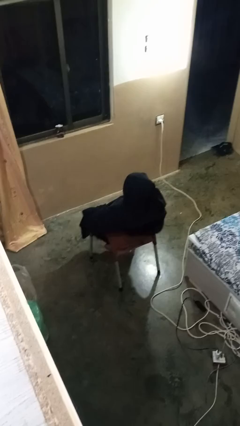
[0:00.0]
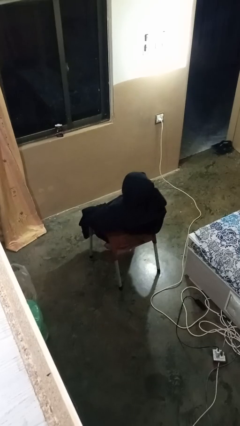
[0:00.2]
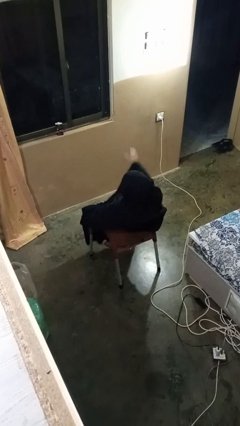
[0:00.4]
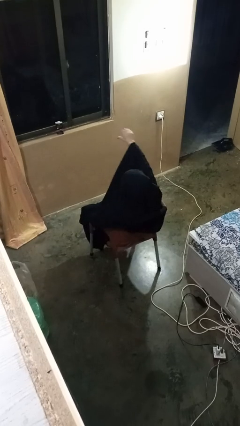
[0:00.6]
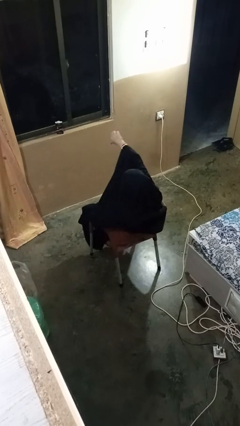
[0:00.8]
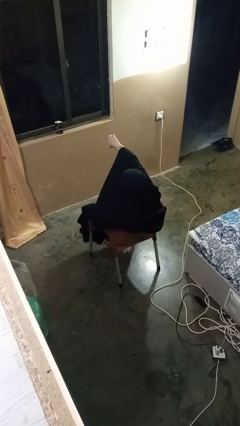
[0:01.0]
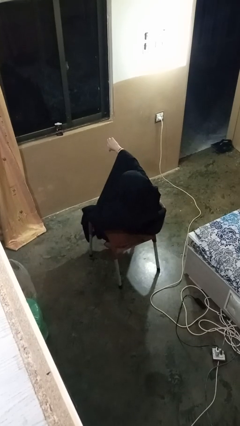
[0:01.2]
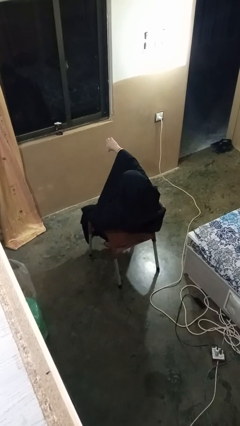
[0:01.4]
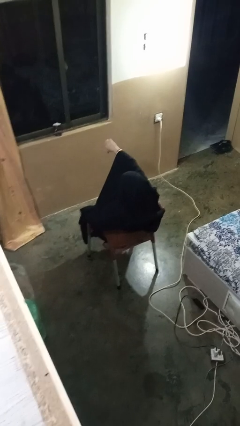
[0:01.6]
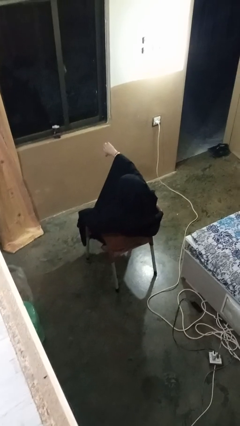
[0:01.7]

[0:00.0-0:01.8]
person gestures thumbs down

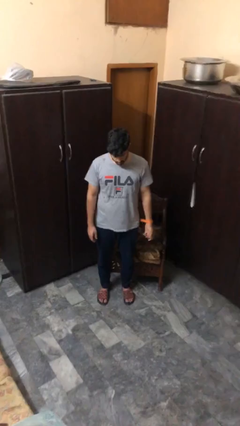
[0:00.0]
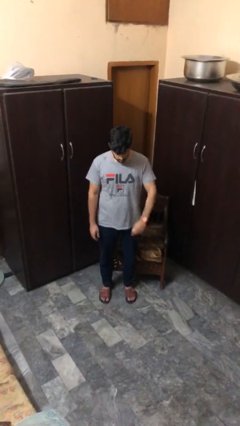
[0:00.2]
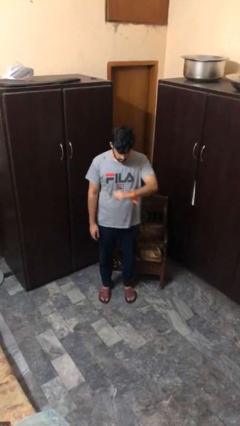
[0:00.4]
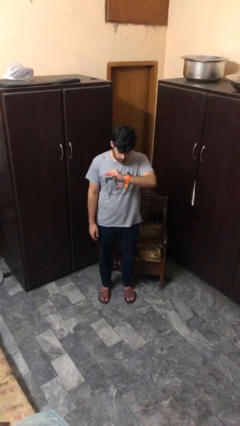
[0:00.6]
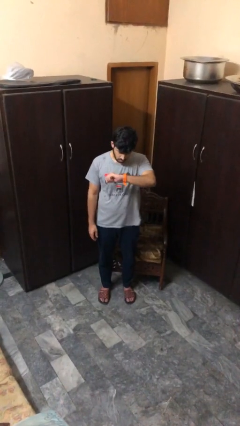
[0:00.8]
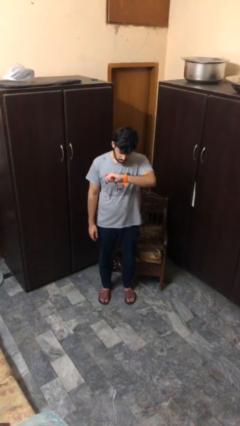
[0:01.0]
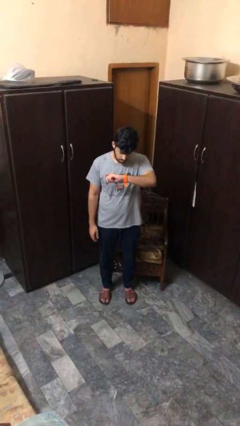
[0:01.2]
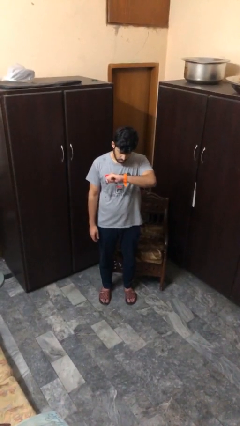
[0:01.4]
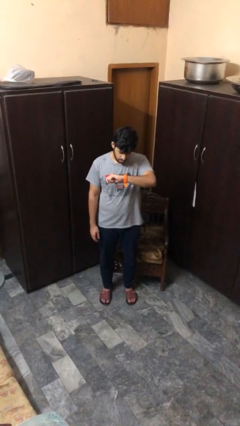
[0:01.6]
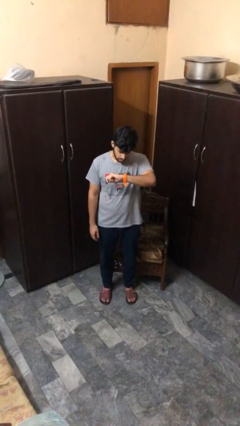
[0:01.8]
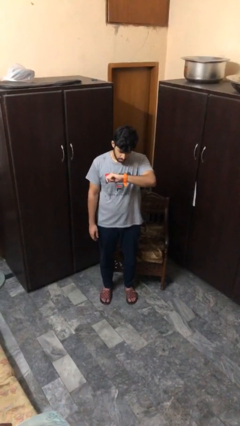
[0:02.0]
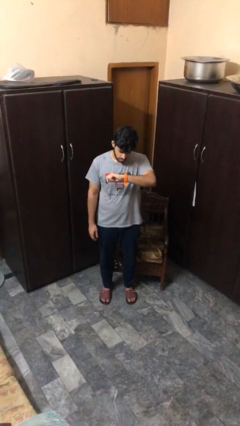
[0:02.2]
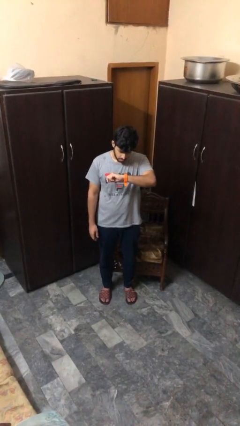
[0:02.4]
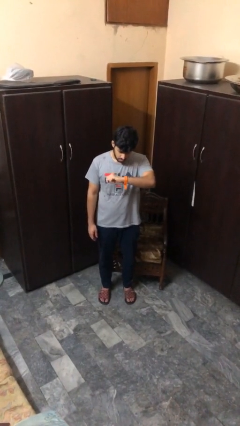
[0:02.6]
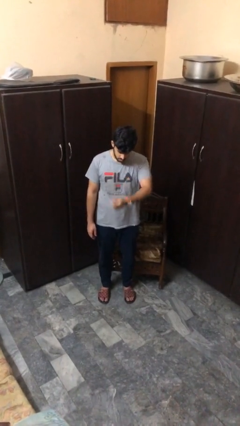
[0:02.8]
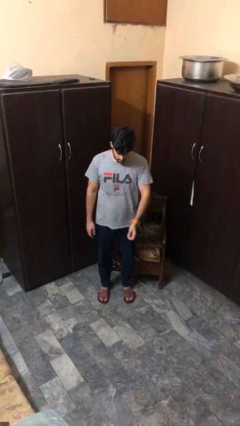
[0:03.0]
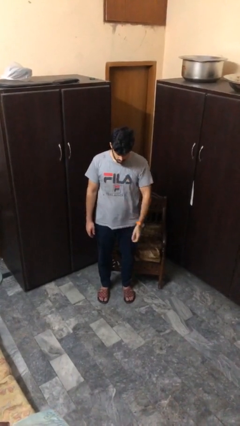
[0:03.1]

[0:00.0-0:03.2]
person looks at wristwatch

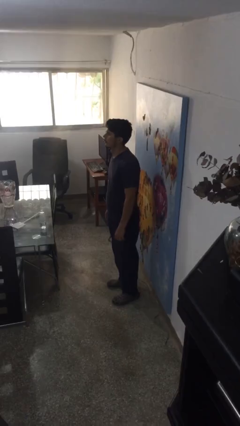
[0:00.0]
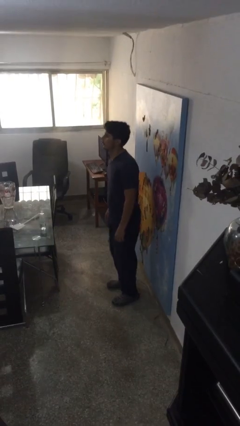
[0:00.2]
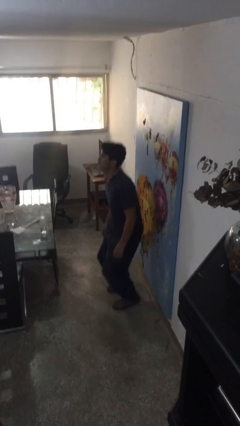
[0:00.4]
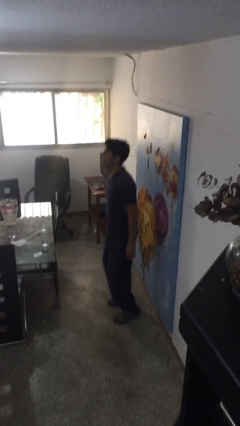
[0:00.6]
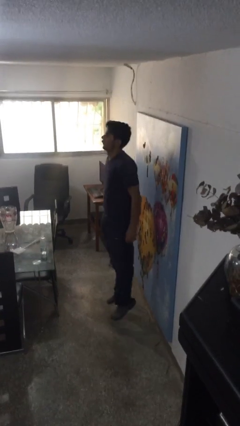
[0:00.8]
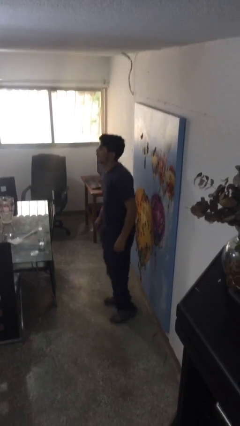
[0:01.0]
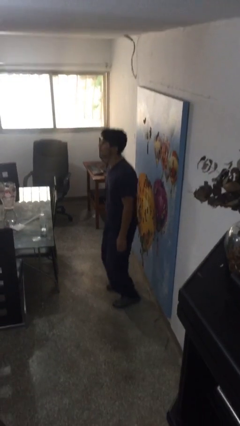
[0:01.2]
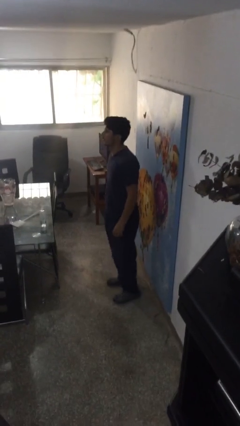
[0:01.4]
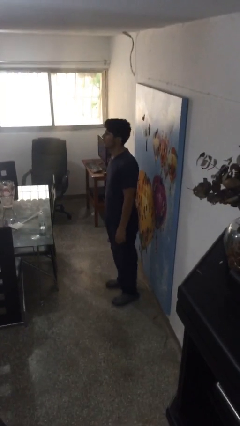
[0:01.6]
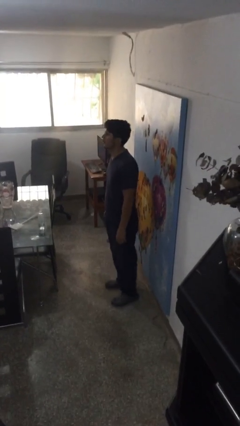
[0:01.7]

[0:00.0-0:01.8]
person jumps

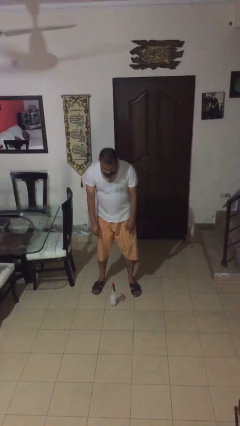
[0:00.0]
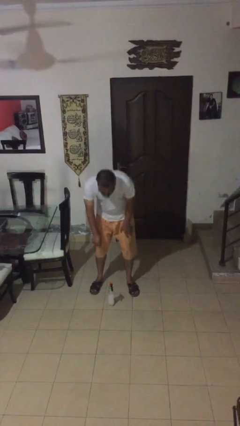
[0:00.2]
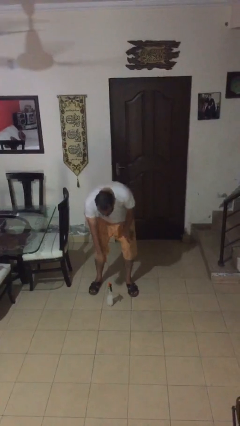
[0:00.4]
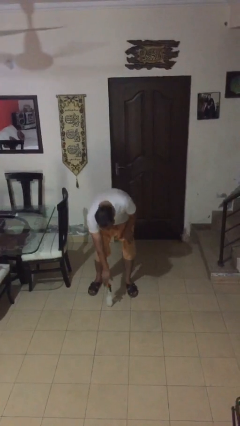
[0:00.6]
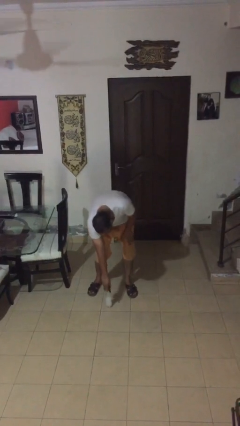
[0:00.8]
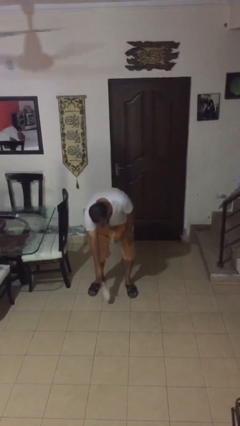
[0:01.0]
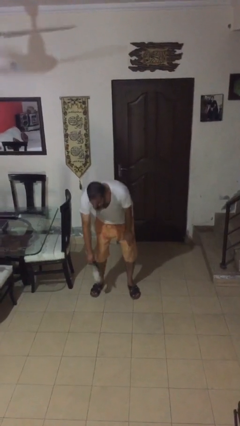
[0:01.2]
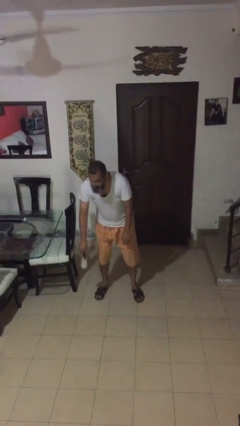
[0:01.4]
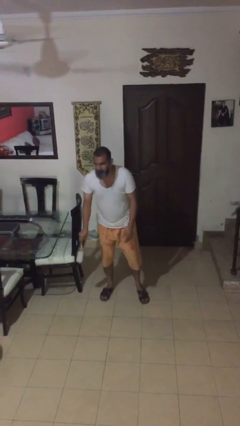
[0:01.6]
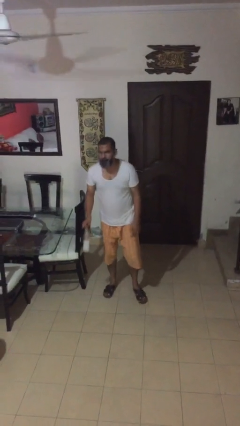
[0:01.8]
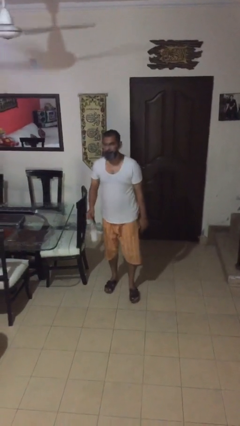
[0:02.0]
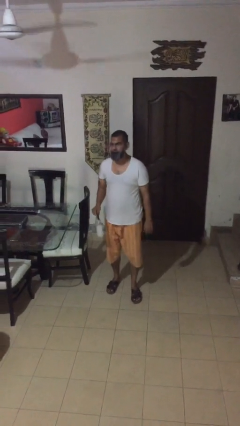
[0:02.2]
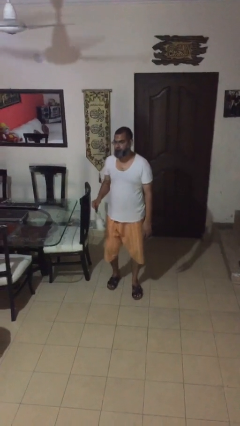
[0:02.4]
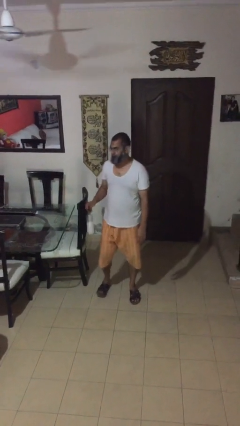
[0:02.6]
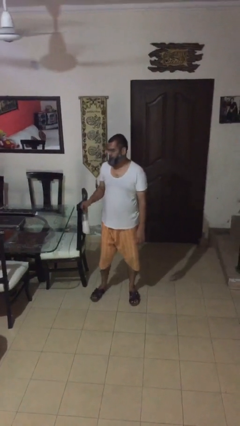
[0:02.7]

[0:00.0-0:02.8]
person picks up object from floor

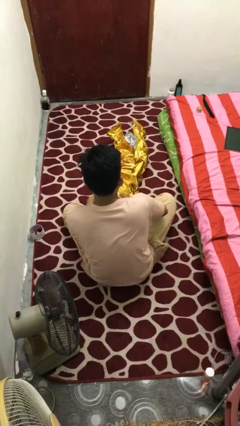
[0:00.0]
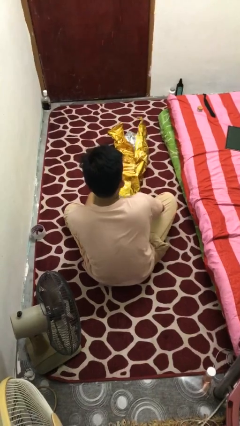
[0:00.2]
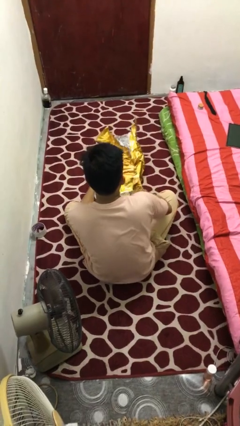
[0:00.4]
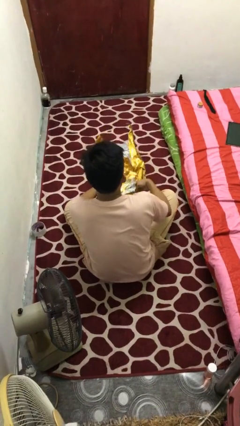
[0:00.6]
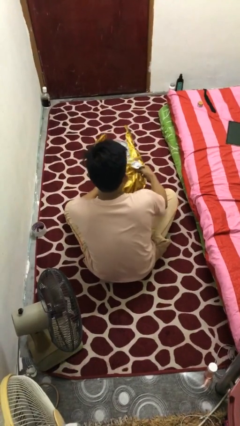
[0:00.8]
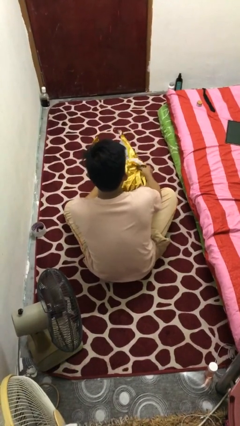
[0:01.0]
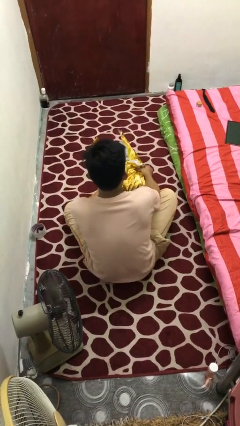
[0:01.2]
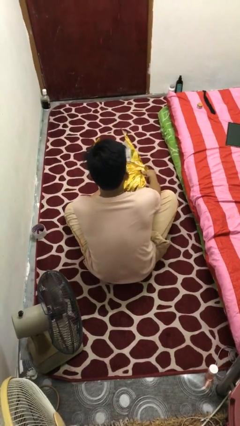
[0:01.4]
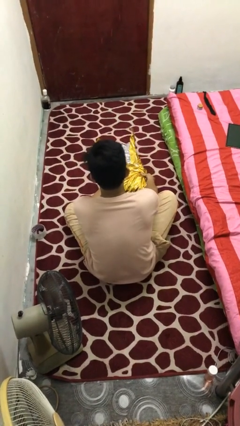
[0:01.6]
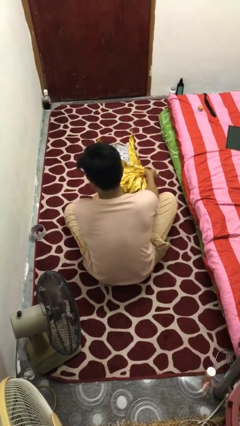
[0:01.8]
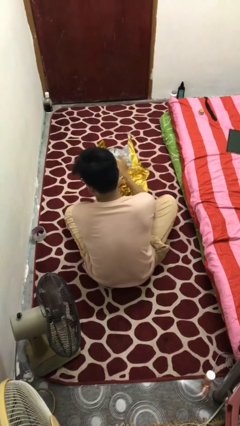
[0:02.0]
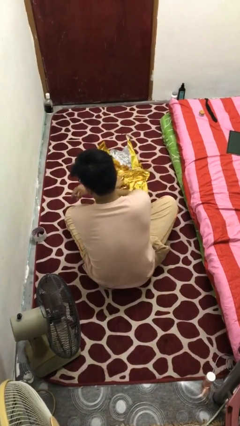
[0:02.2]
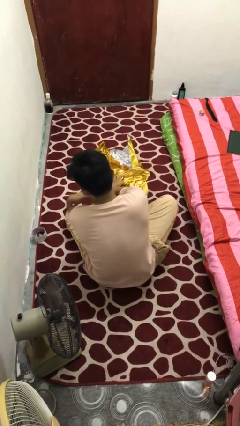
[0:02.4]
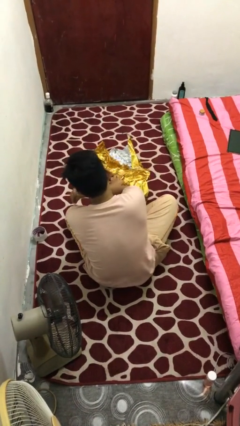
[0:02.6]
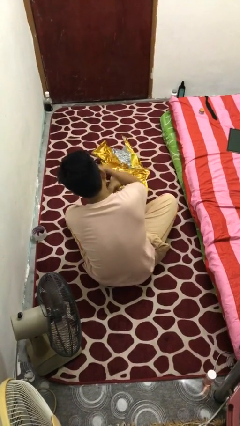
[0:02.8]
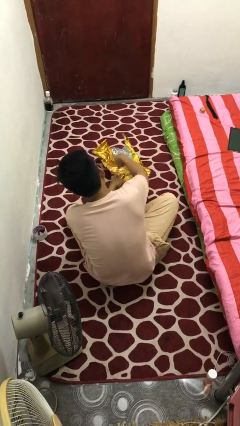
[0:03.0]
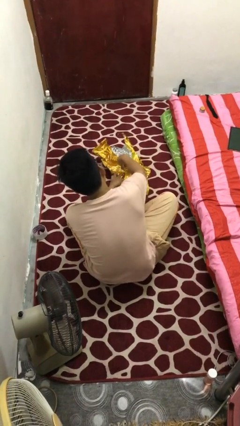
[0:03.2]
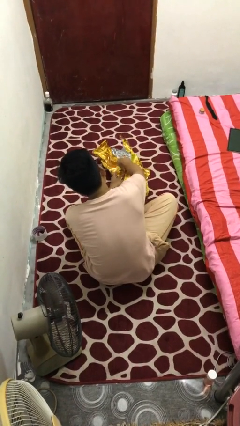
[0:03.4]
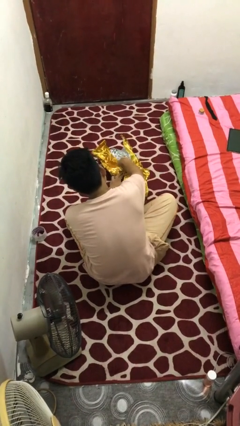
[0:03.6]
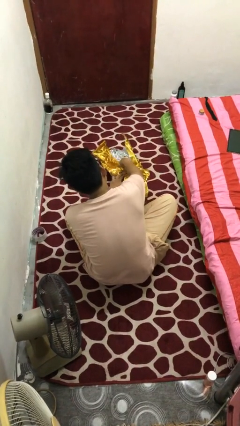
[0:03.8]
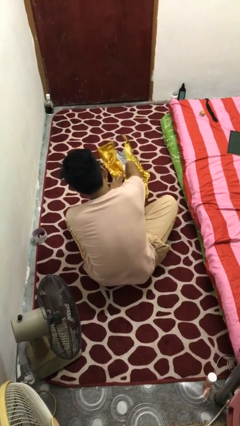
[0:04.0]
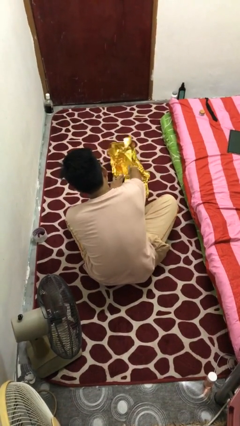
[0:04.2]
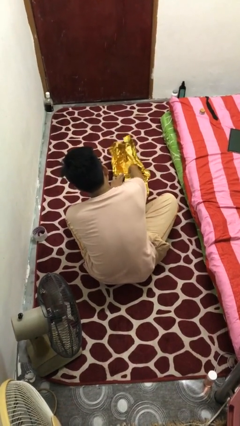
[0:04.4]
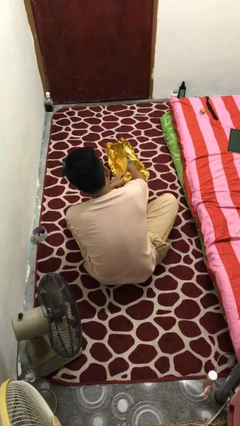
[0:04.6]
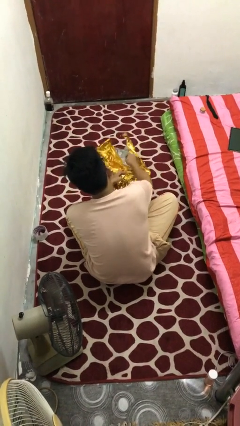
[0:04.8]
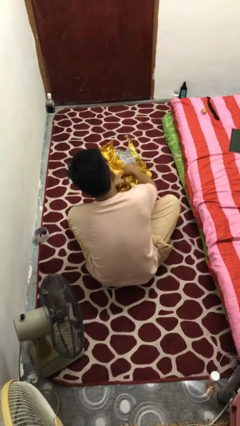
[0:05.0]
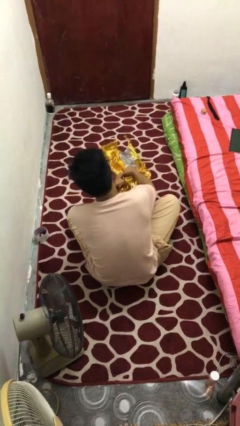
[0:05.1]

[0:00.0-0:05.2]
person wraps box

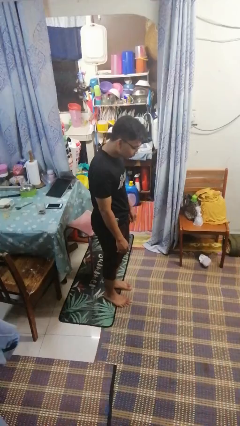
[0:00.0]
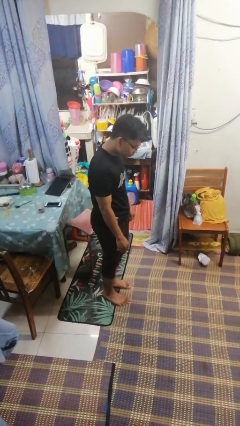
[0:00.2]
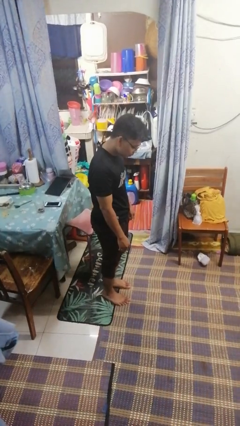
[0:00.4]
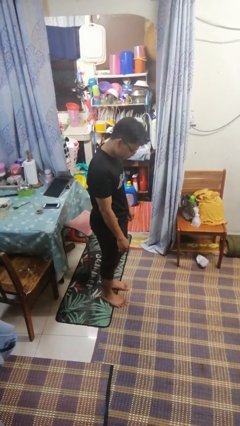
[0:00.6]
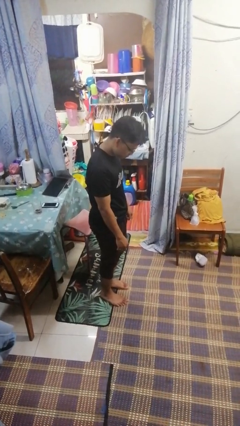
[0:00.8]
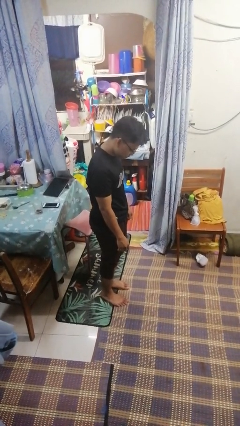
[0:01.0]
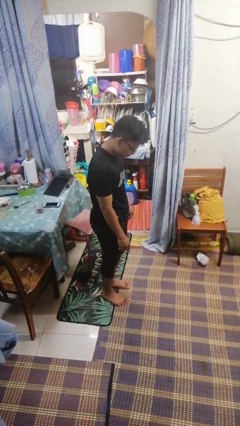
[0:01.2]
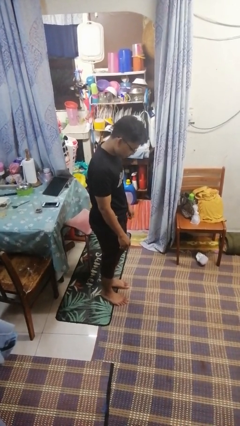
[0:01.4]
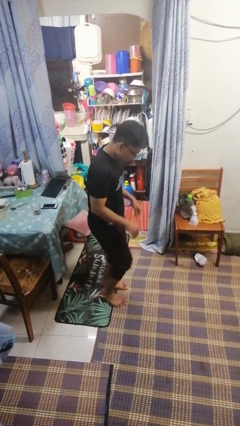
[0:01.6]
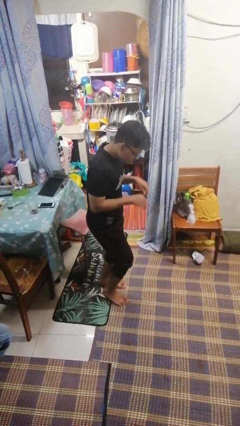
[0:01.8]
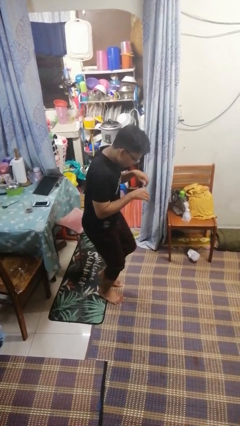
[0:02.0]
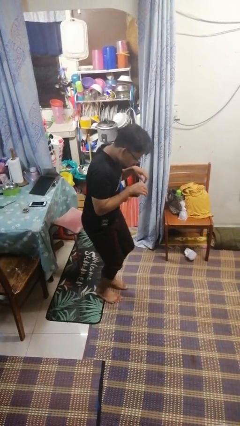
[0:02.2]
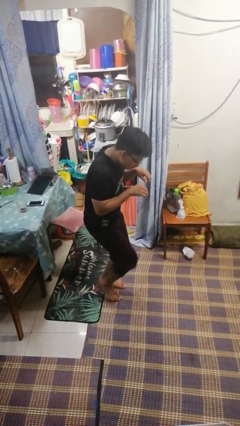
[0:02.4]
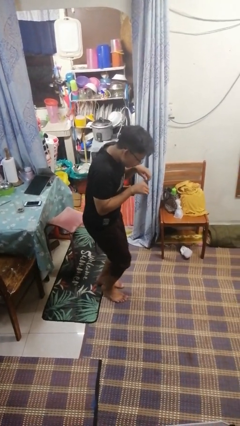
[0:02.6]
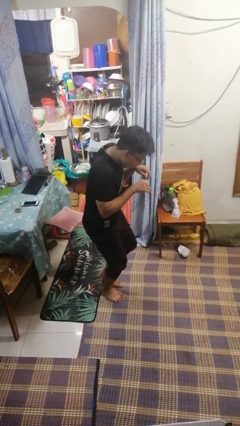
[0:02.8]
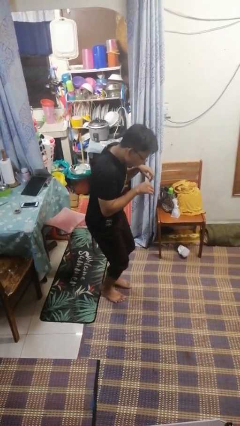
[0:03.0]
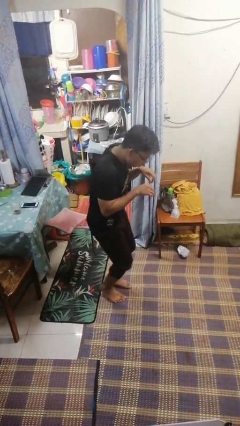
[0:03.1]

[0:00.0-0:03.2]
person walks tiptoe
